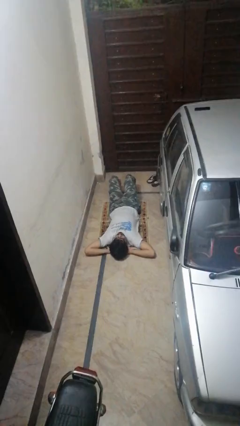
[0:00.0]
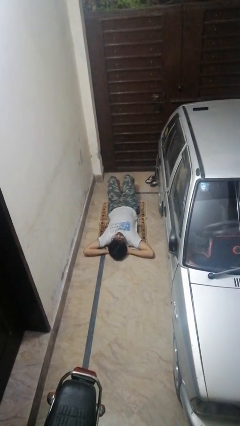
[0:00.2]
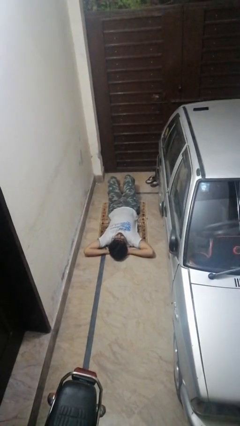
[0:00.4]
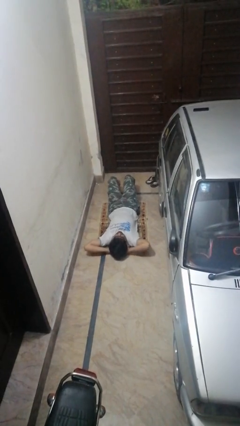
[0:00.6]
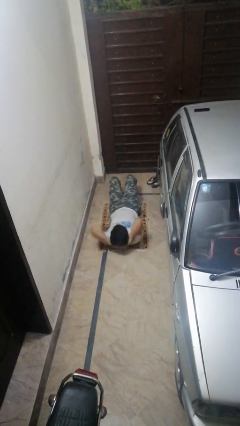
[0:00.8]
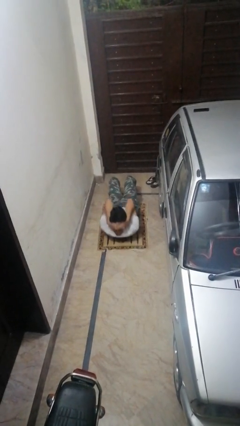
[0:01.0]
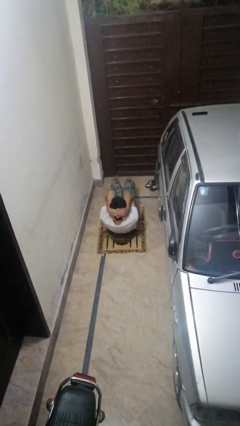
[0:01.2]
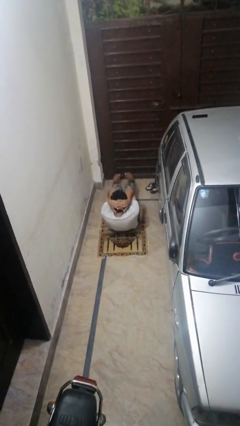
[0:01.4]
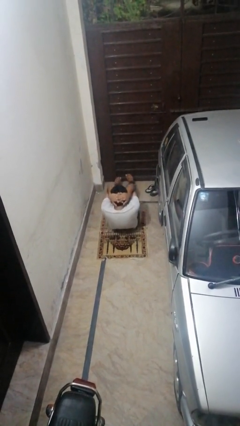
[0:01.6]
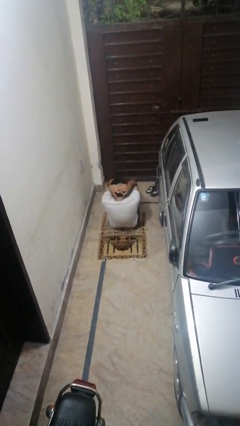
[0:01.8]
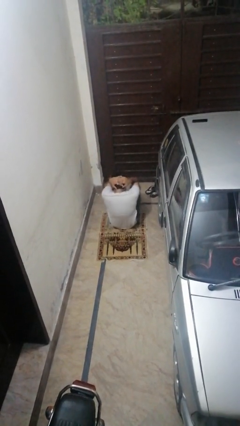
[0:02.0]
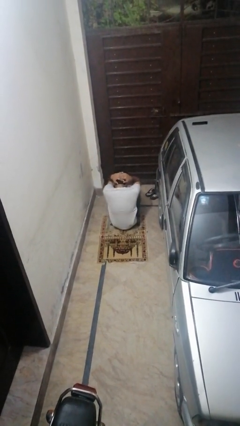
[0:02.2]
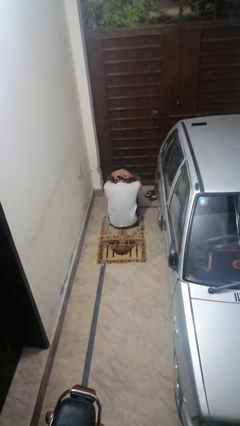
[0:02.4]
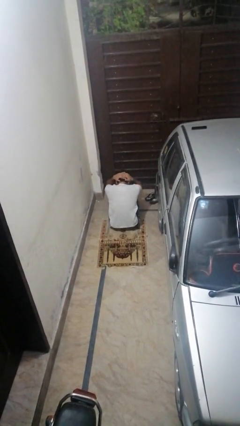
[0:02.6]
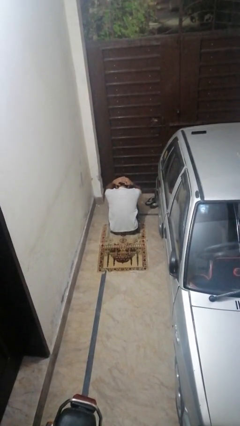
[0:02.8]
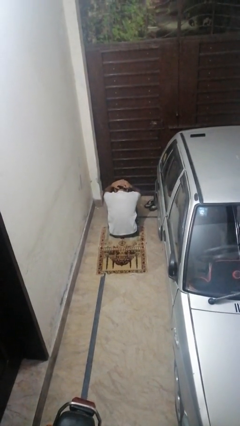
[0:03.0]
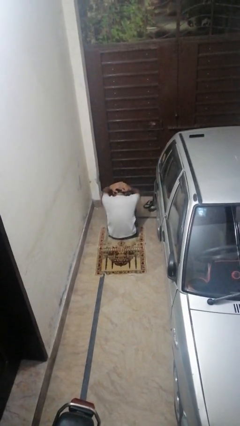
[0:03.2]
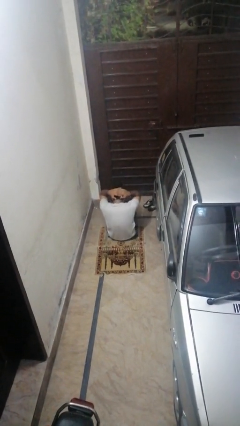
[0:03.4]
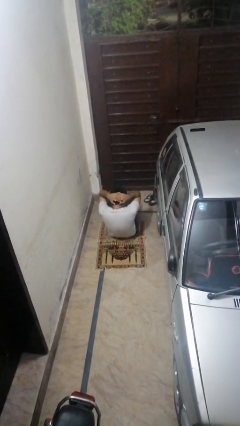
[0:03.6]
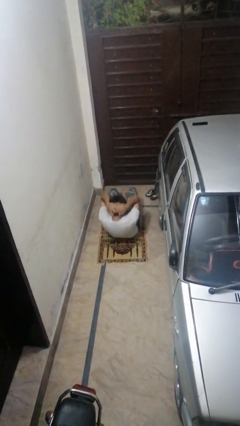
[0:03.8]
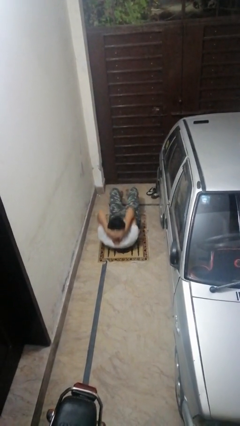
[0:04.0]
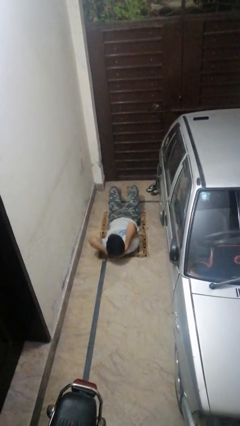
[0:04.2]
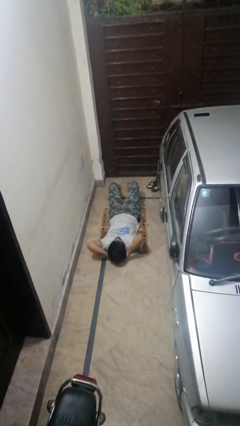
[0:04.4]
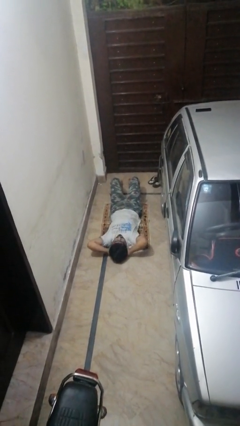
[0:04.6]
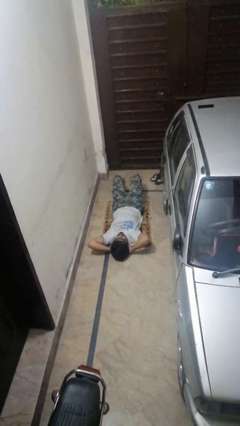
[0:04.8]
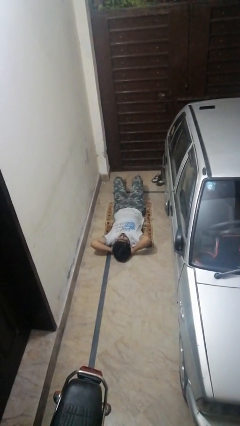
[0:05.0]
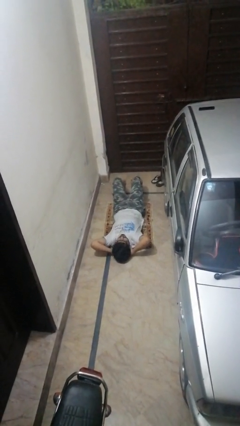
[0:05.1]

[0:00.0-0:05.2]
person exercises with situp

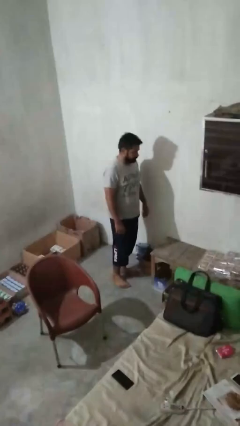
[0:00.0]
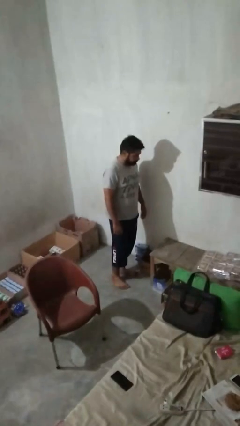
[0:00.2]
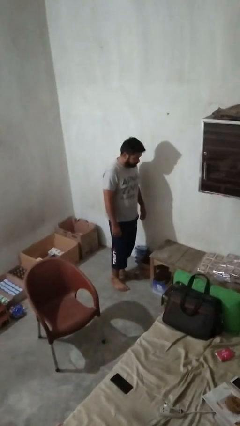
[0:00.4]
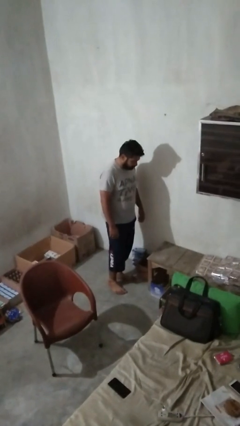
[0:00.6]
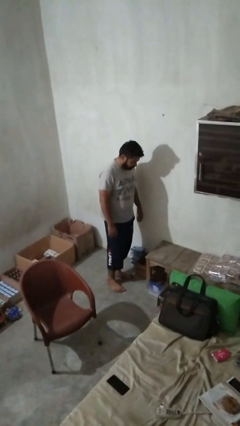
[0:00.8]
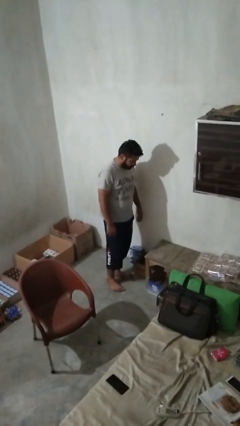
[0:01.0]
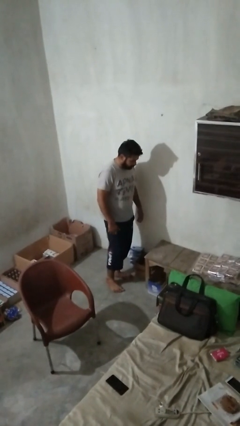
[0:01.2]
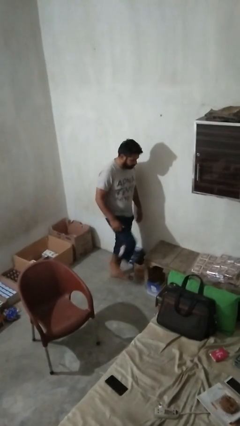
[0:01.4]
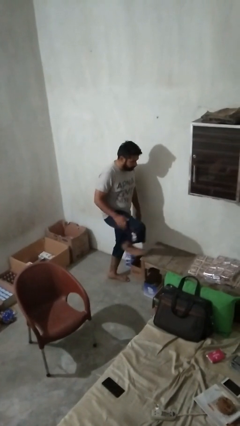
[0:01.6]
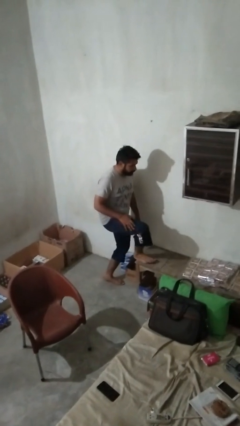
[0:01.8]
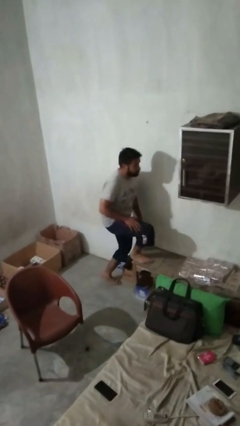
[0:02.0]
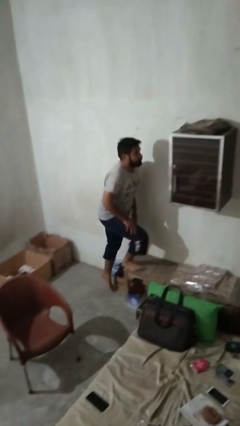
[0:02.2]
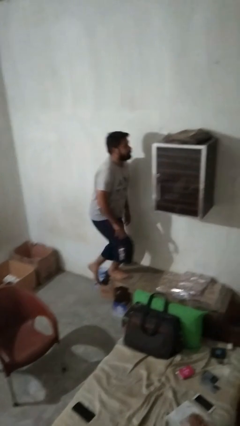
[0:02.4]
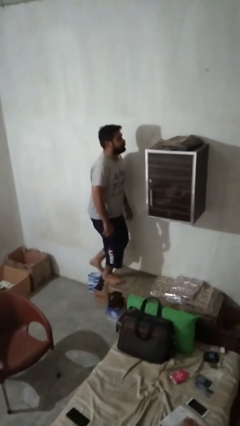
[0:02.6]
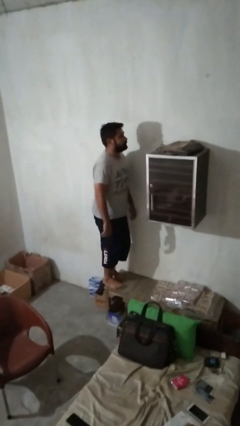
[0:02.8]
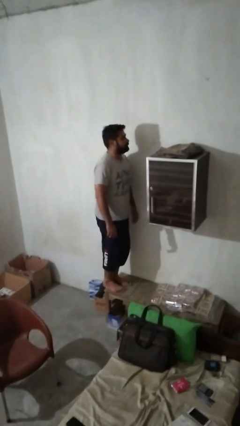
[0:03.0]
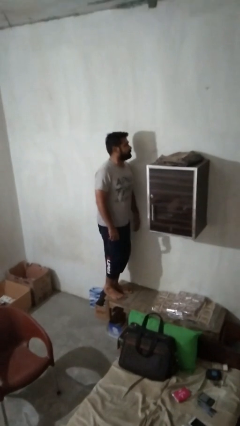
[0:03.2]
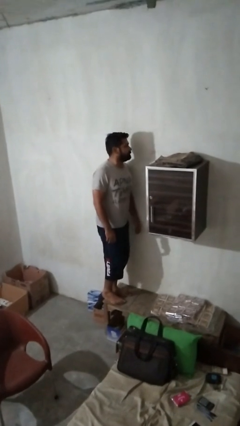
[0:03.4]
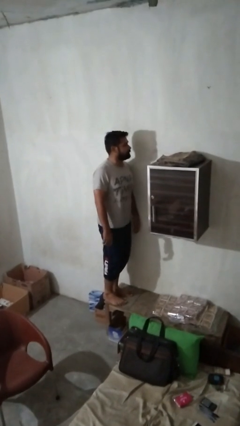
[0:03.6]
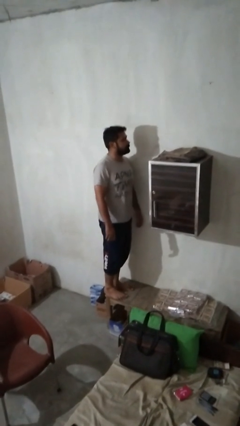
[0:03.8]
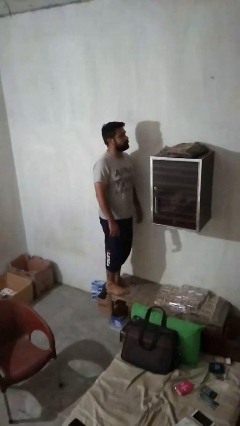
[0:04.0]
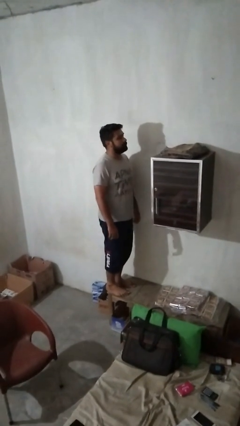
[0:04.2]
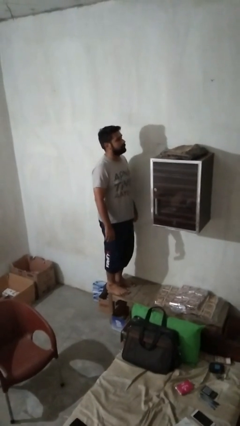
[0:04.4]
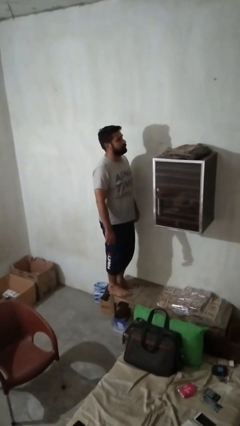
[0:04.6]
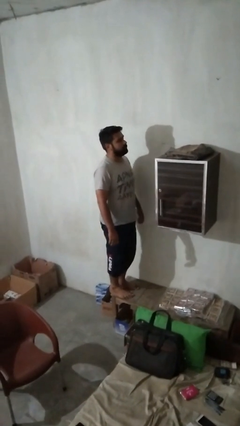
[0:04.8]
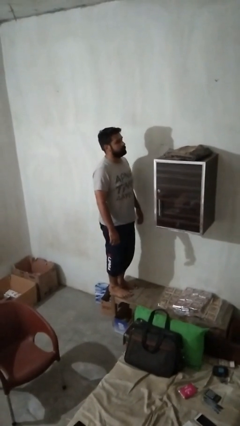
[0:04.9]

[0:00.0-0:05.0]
person climbs on table

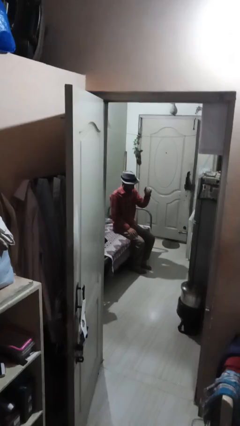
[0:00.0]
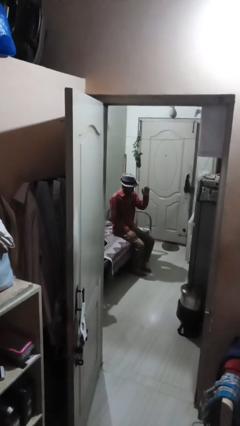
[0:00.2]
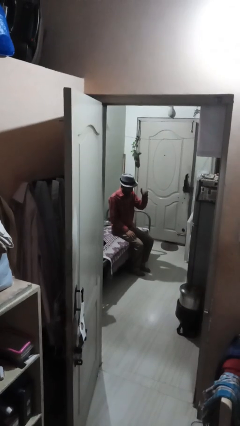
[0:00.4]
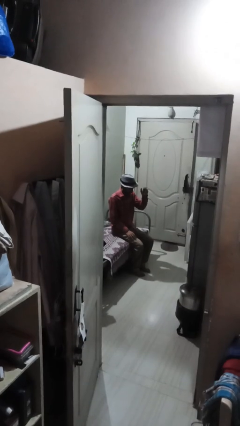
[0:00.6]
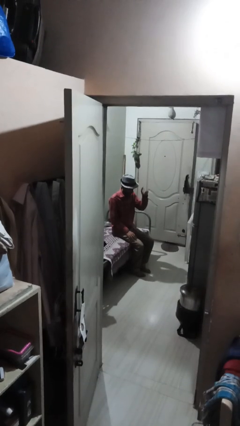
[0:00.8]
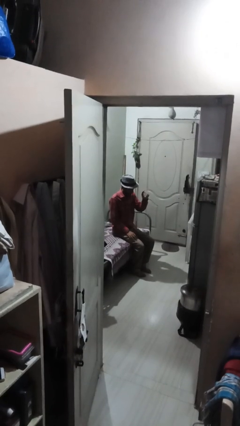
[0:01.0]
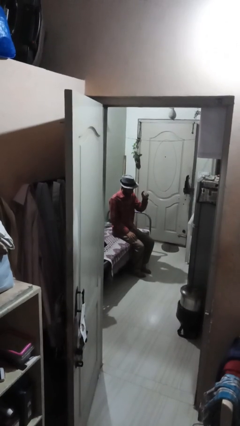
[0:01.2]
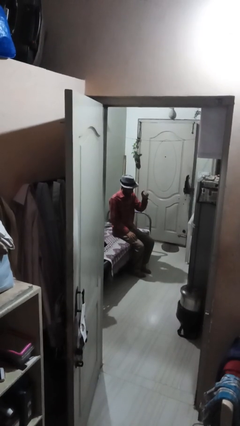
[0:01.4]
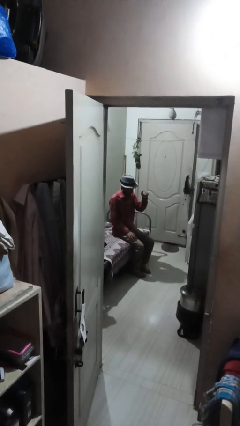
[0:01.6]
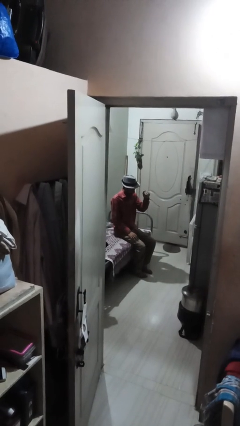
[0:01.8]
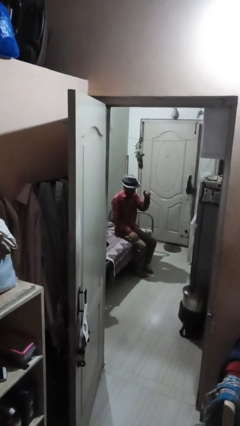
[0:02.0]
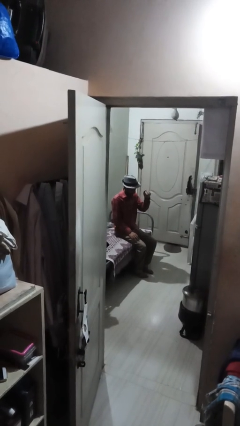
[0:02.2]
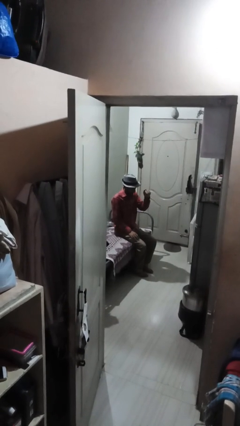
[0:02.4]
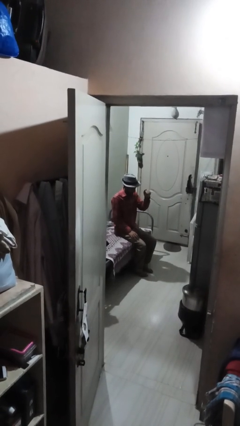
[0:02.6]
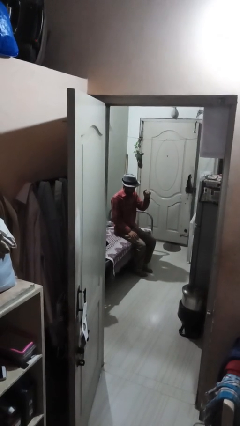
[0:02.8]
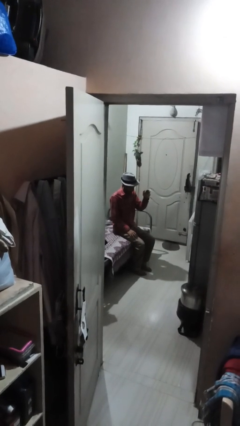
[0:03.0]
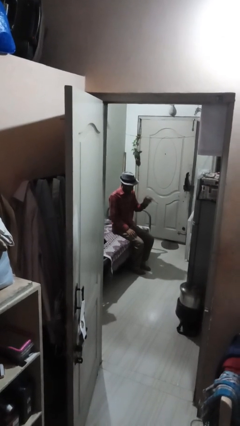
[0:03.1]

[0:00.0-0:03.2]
person gestures come here

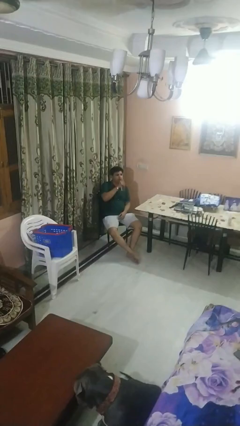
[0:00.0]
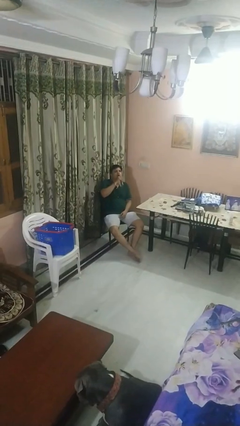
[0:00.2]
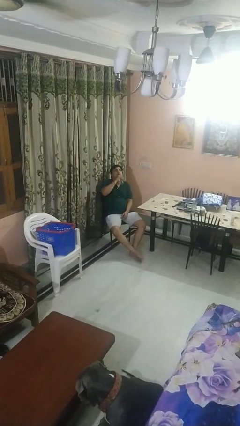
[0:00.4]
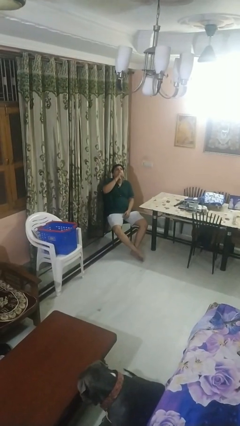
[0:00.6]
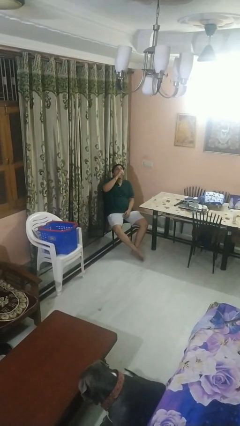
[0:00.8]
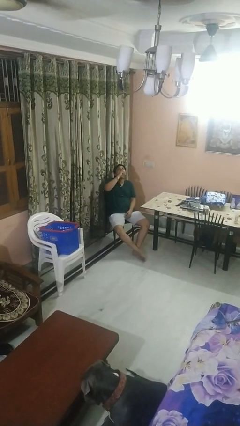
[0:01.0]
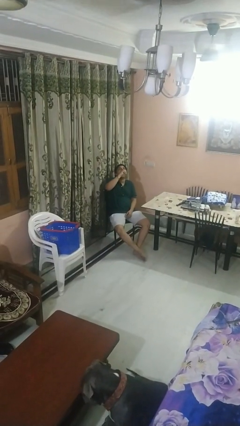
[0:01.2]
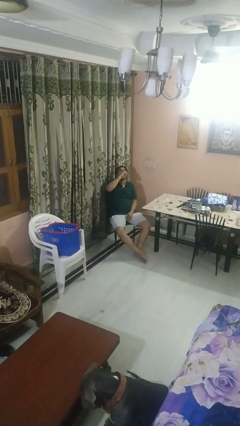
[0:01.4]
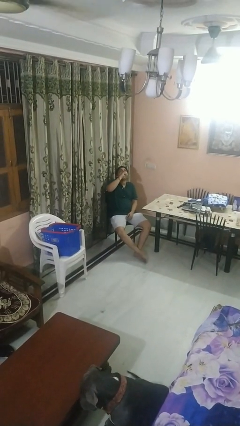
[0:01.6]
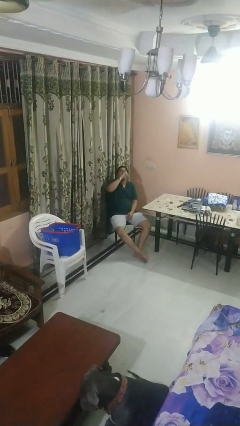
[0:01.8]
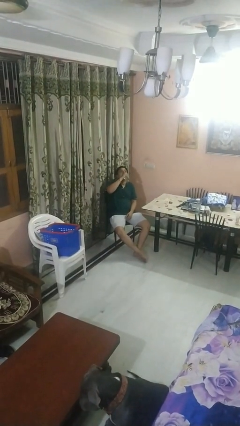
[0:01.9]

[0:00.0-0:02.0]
person drinks from bottle

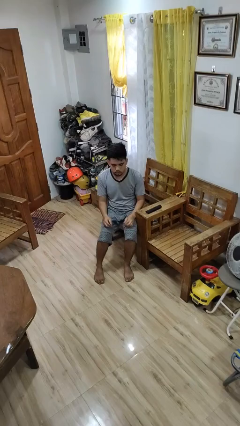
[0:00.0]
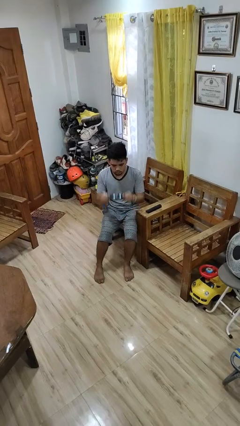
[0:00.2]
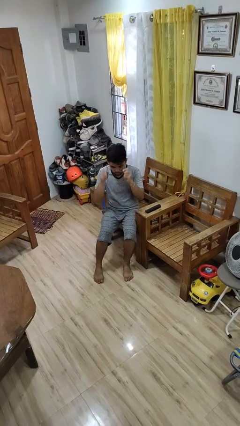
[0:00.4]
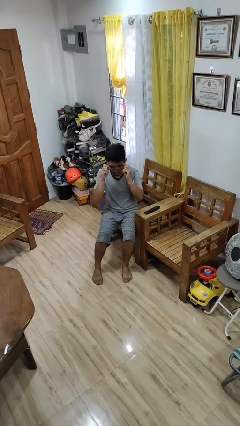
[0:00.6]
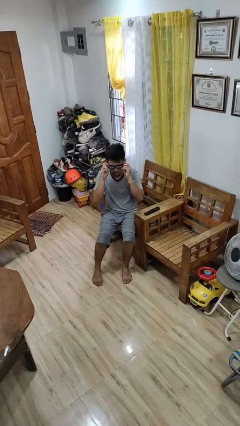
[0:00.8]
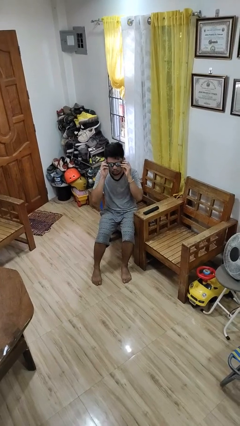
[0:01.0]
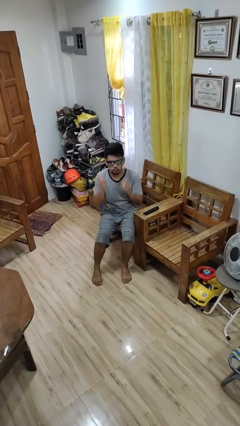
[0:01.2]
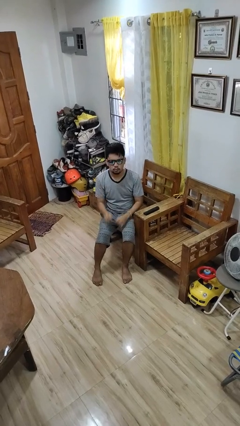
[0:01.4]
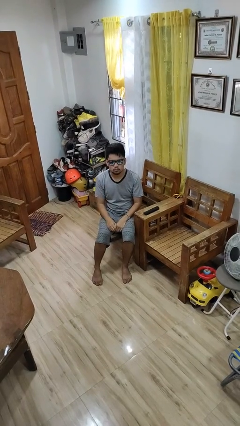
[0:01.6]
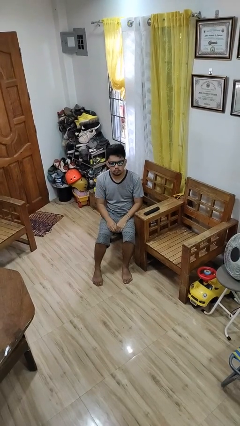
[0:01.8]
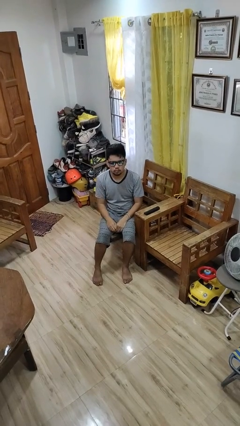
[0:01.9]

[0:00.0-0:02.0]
person puts on sunglasses
